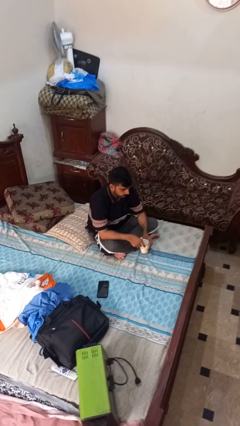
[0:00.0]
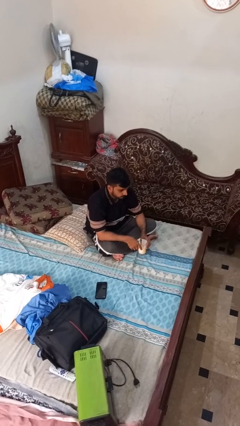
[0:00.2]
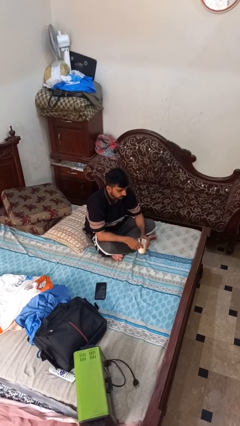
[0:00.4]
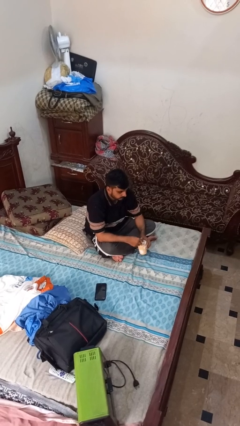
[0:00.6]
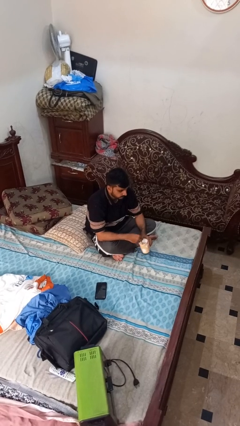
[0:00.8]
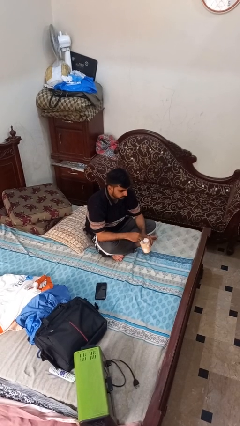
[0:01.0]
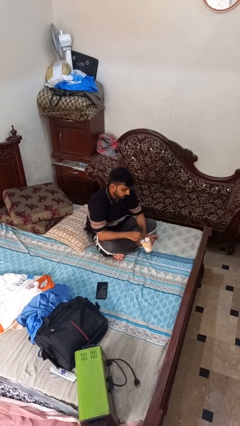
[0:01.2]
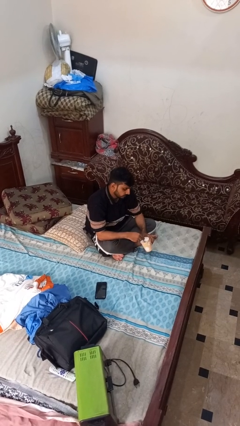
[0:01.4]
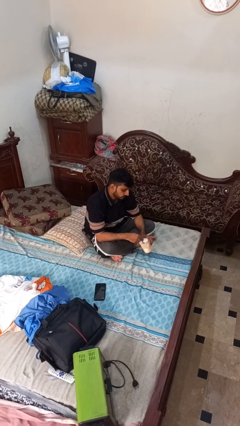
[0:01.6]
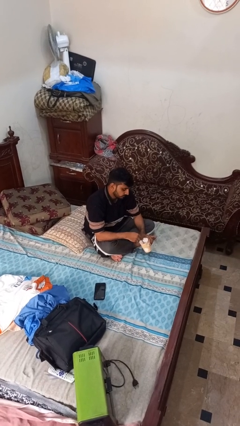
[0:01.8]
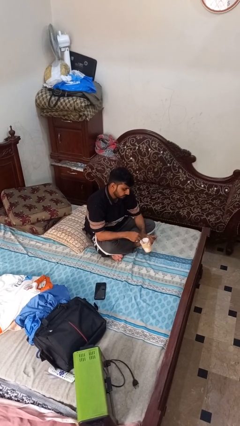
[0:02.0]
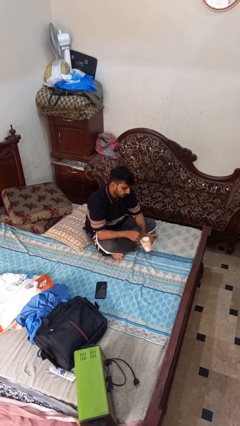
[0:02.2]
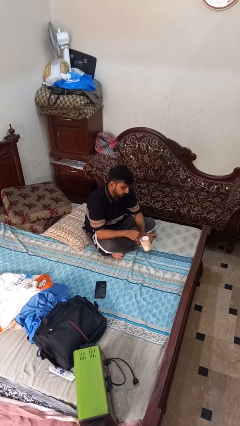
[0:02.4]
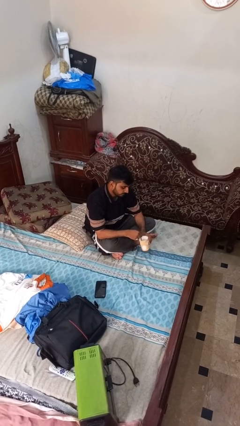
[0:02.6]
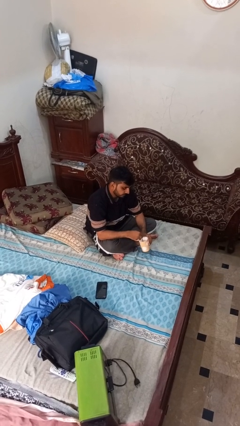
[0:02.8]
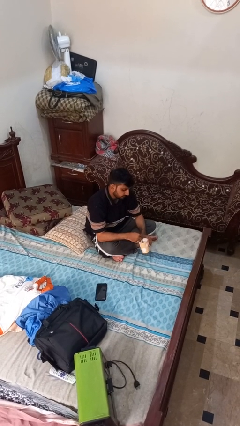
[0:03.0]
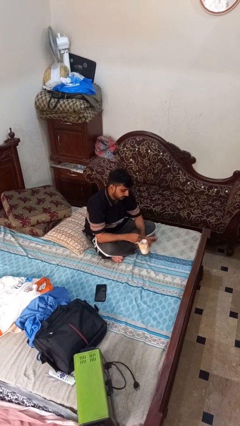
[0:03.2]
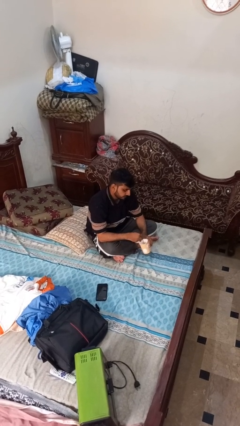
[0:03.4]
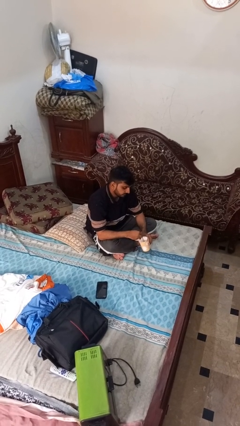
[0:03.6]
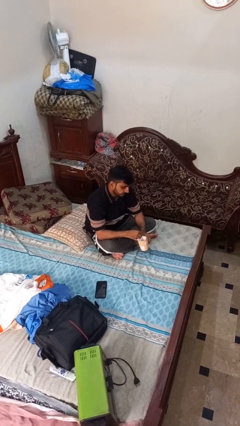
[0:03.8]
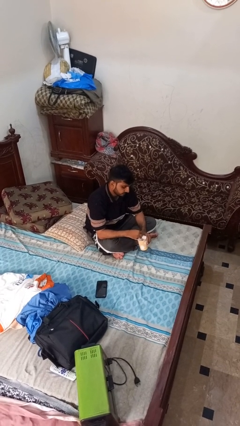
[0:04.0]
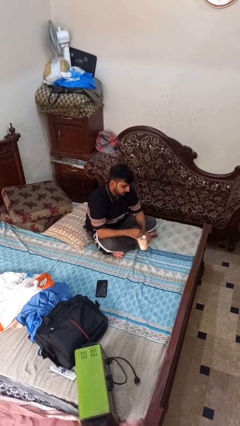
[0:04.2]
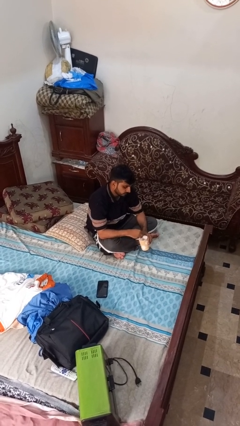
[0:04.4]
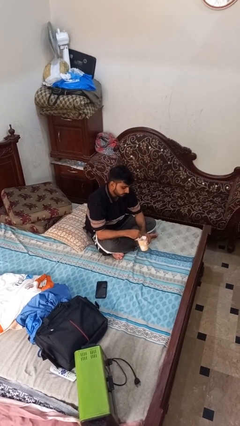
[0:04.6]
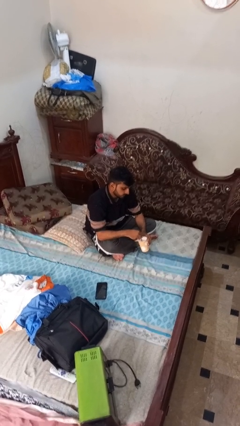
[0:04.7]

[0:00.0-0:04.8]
person stirs mug

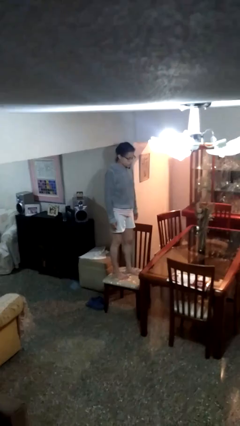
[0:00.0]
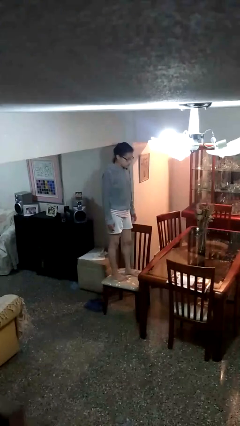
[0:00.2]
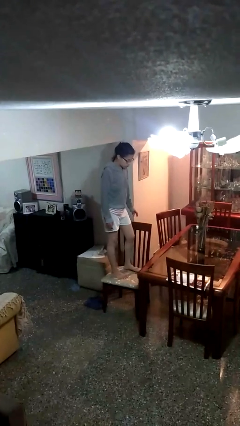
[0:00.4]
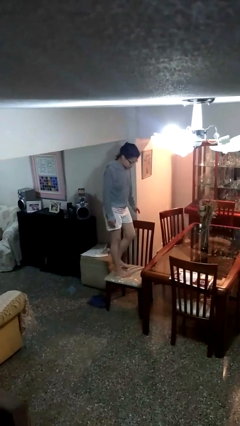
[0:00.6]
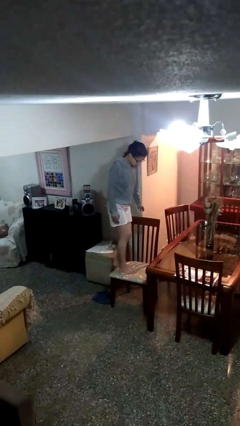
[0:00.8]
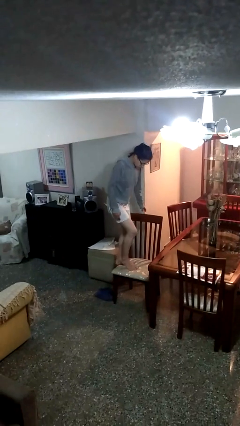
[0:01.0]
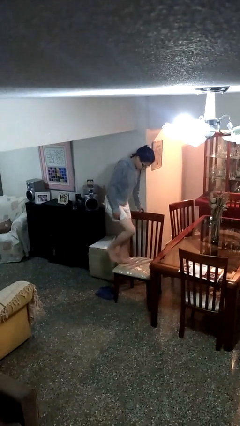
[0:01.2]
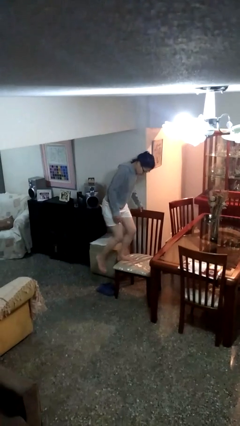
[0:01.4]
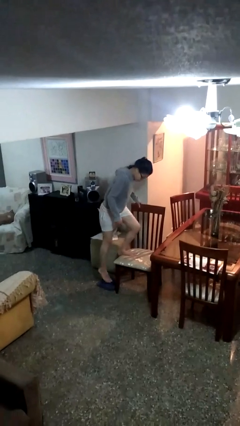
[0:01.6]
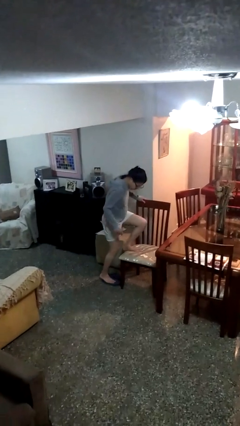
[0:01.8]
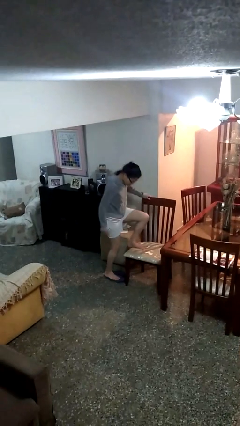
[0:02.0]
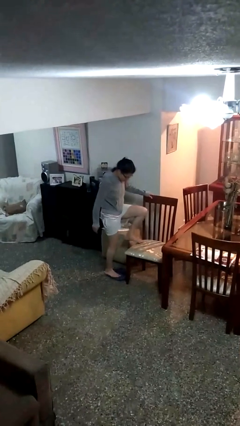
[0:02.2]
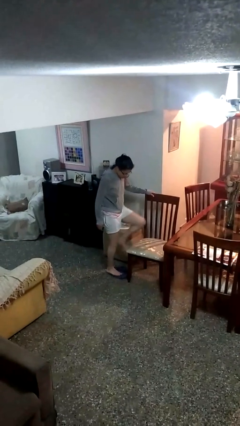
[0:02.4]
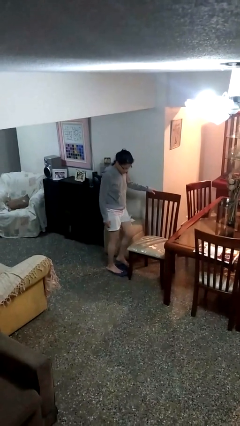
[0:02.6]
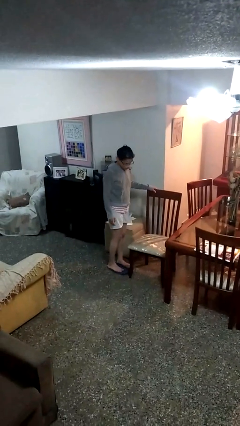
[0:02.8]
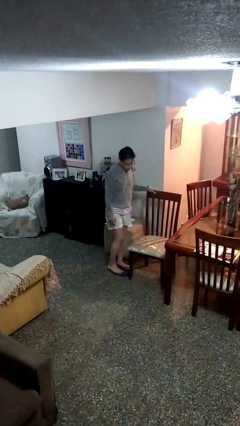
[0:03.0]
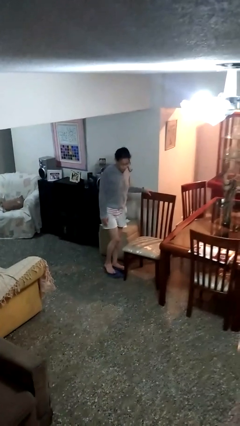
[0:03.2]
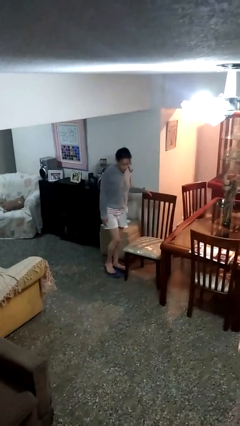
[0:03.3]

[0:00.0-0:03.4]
person climbs off chair

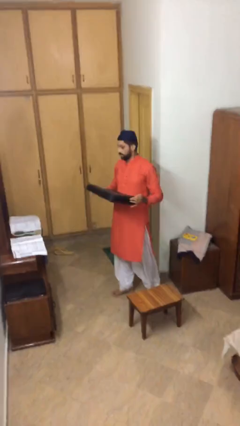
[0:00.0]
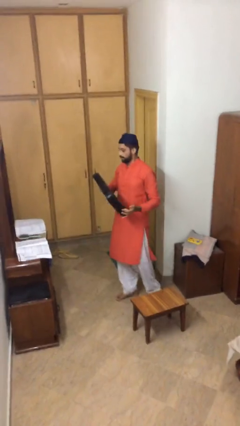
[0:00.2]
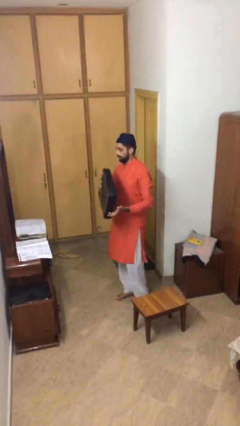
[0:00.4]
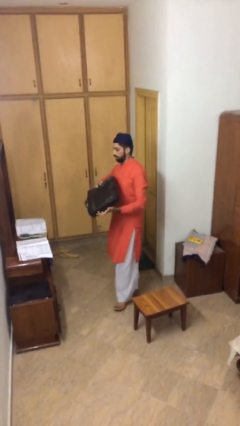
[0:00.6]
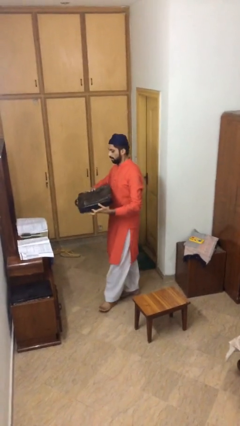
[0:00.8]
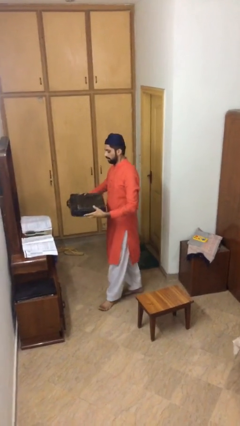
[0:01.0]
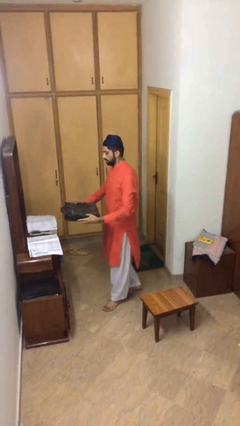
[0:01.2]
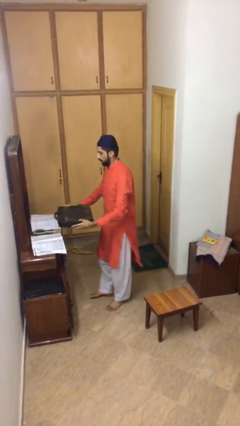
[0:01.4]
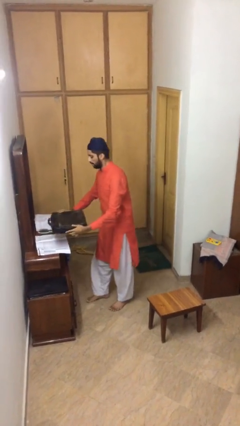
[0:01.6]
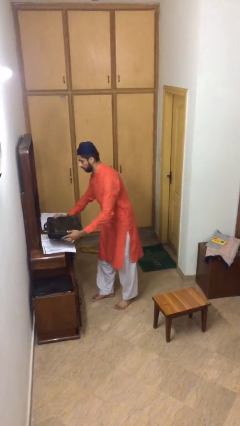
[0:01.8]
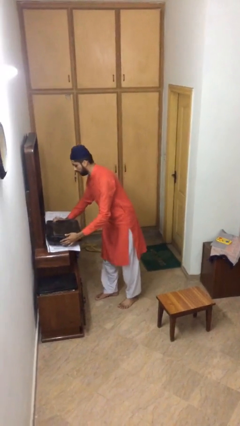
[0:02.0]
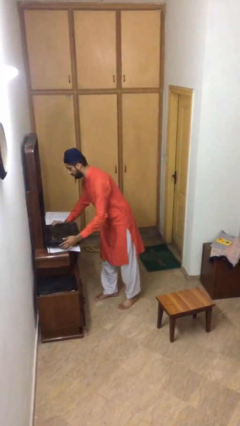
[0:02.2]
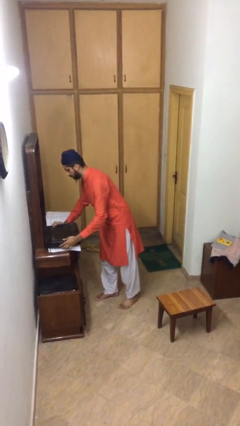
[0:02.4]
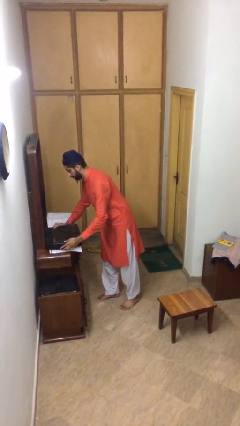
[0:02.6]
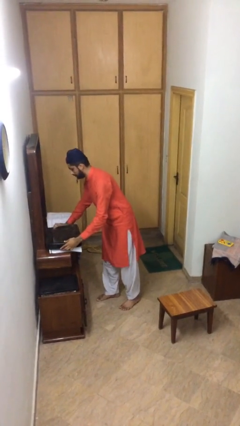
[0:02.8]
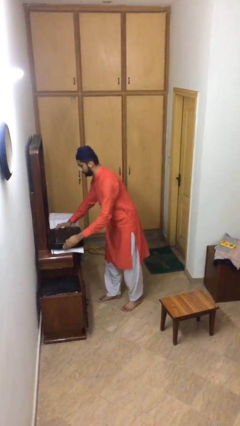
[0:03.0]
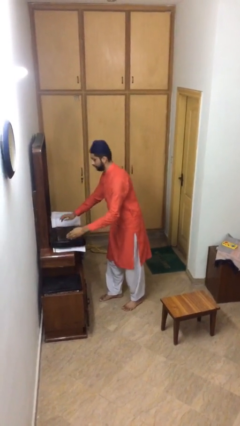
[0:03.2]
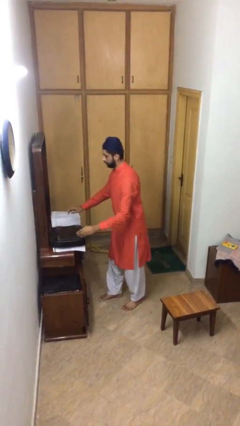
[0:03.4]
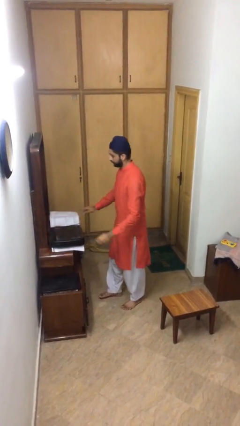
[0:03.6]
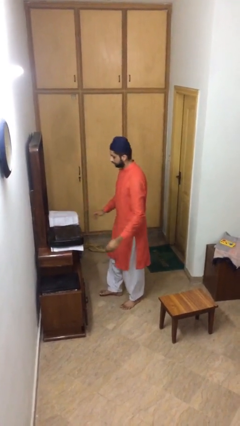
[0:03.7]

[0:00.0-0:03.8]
person puts down object on table

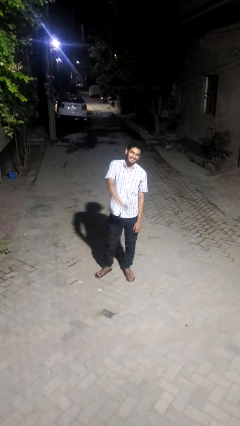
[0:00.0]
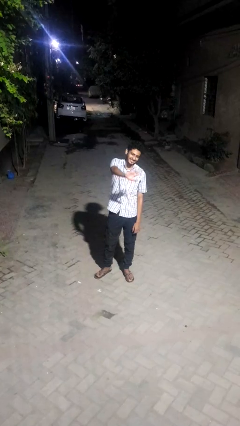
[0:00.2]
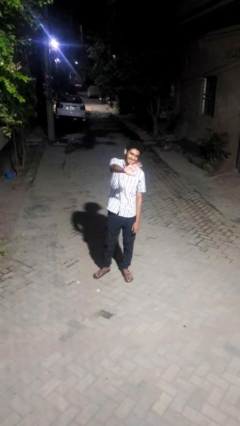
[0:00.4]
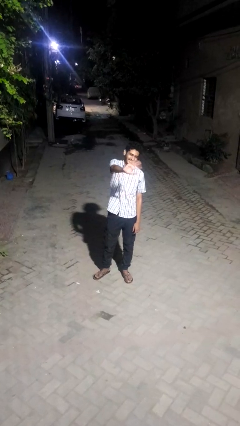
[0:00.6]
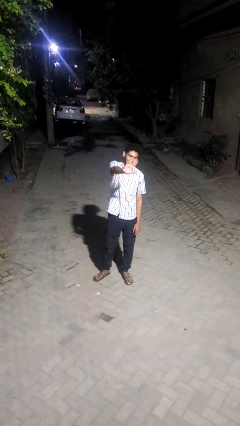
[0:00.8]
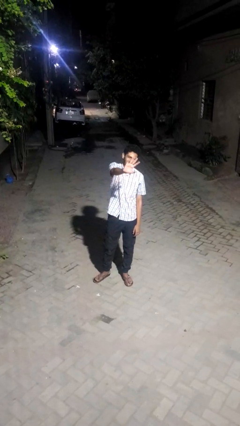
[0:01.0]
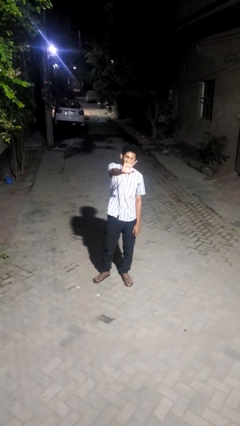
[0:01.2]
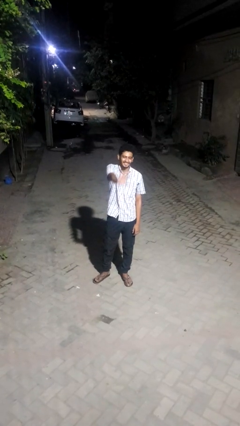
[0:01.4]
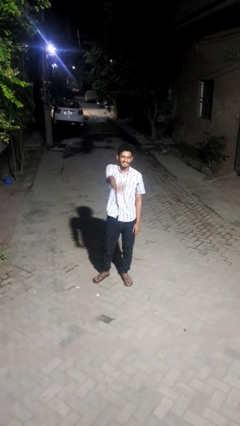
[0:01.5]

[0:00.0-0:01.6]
person waves at person

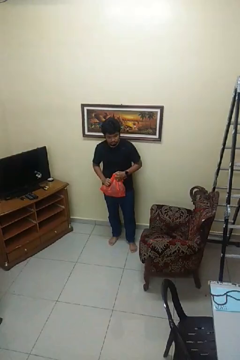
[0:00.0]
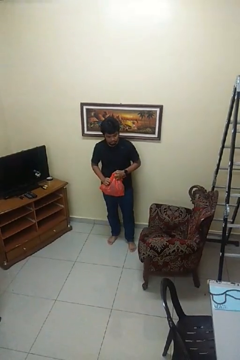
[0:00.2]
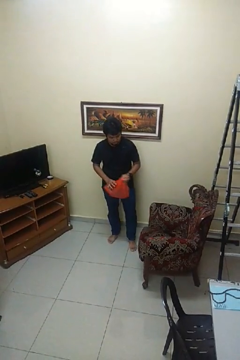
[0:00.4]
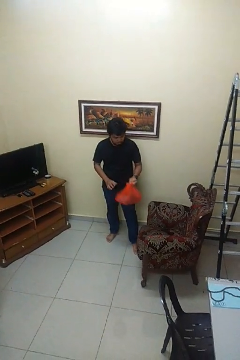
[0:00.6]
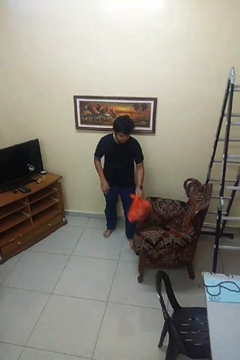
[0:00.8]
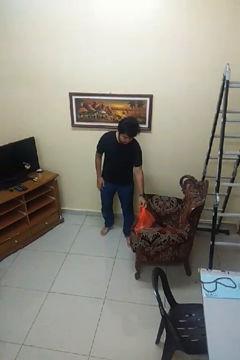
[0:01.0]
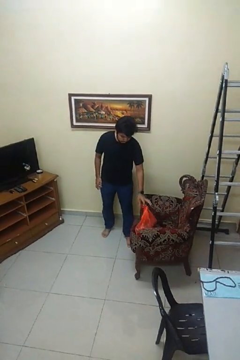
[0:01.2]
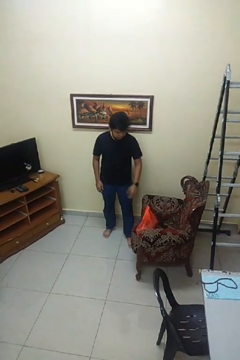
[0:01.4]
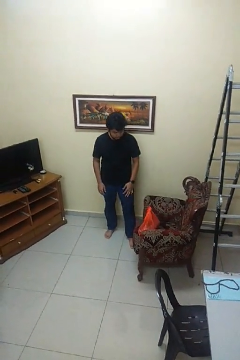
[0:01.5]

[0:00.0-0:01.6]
person puts down object on couch

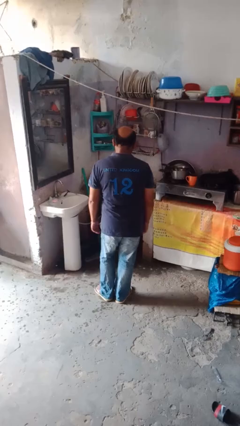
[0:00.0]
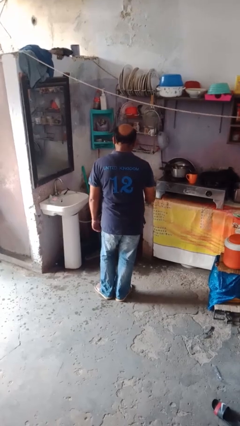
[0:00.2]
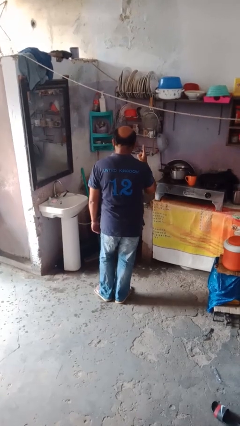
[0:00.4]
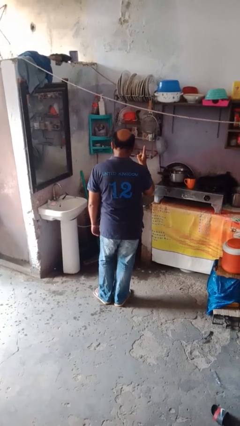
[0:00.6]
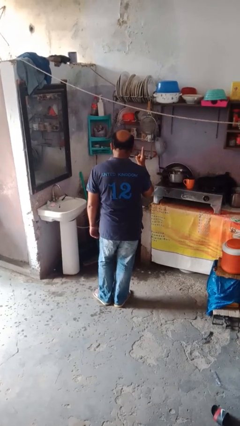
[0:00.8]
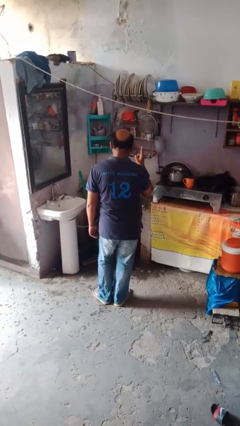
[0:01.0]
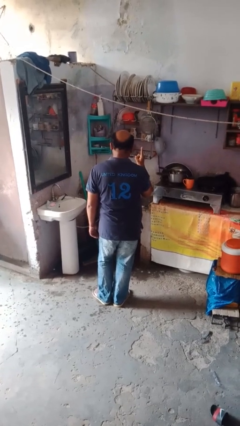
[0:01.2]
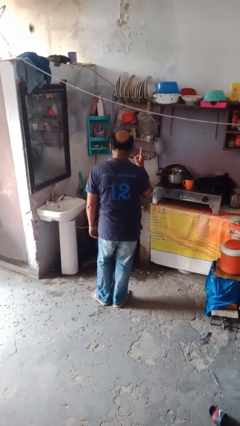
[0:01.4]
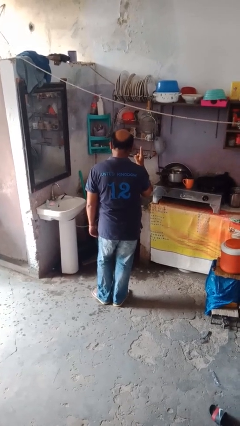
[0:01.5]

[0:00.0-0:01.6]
person gestures number one

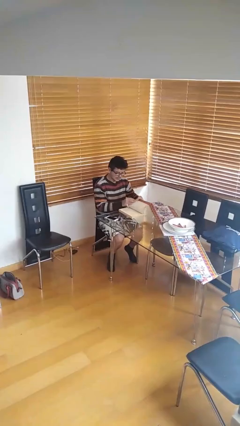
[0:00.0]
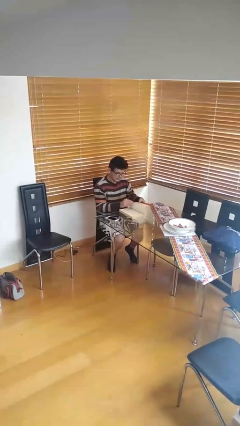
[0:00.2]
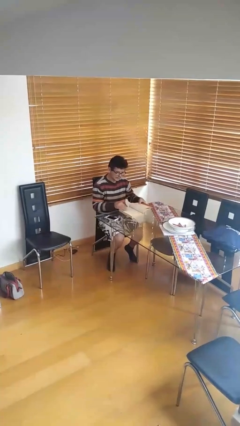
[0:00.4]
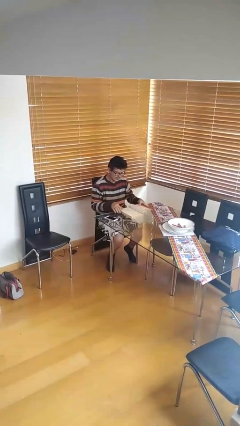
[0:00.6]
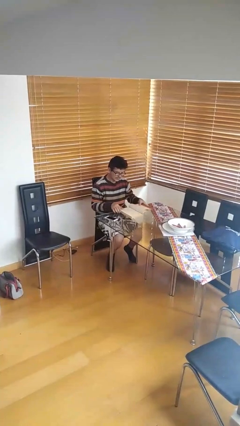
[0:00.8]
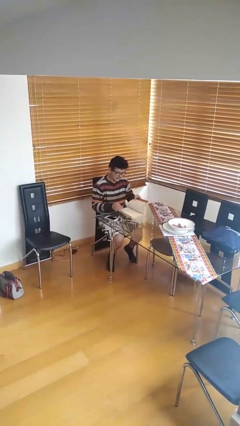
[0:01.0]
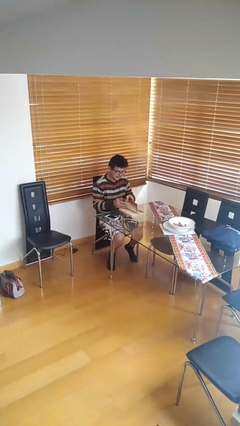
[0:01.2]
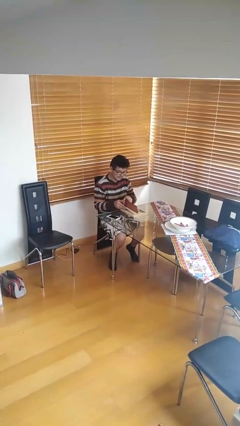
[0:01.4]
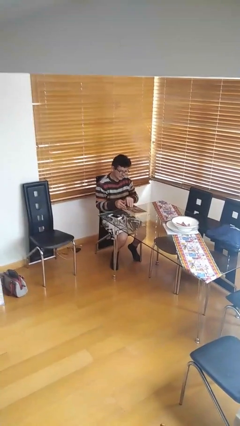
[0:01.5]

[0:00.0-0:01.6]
person reads document
